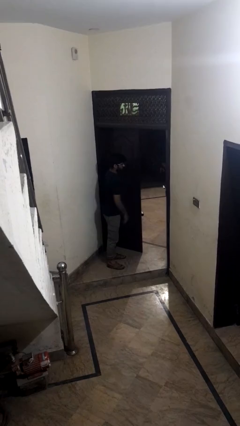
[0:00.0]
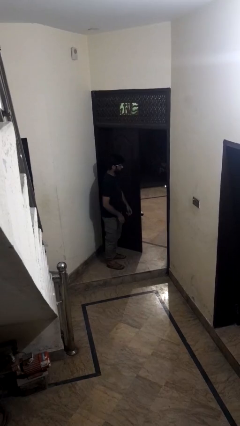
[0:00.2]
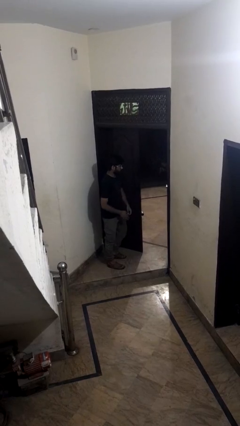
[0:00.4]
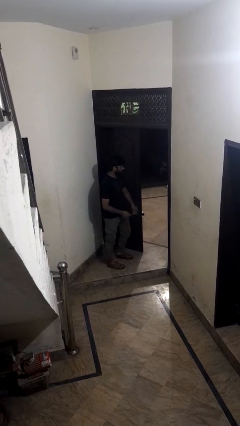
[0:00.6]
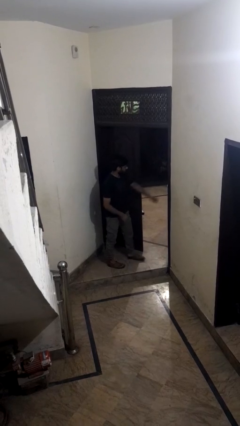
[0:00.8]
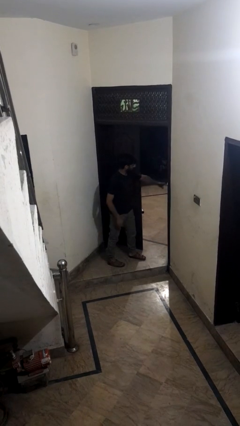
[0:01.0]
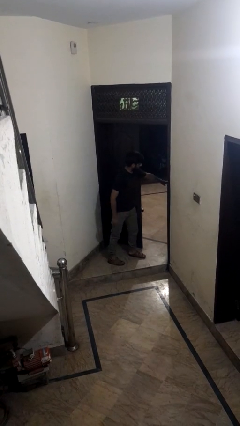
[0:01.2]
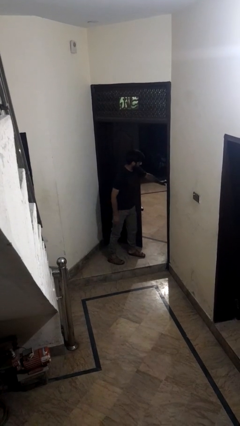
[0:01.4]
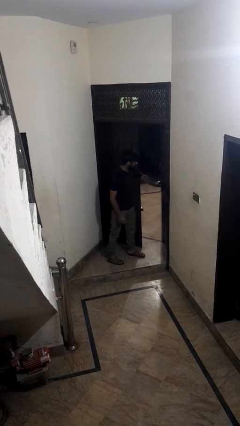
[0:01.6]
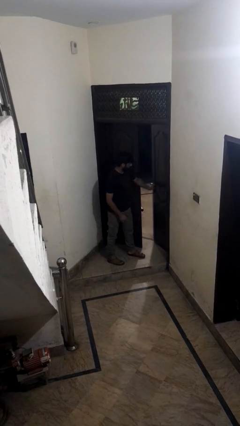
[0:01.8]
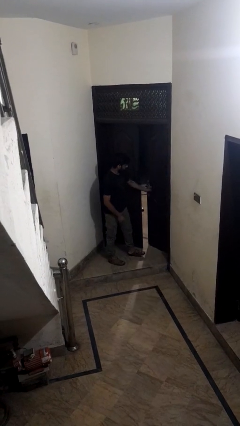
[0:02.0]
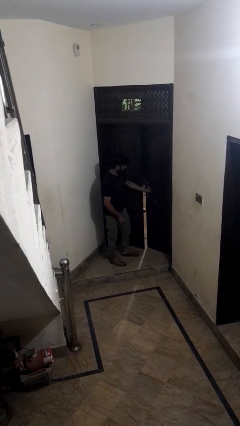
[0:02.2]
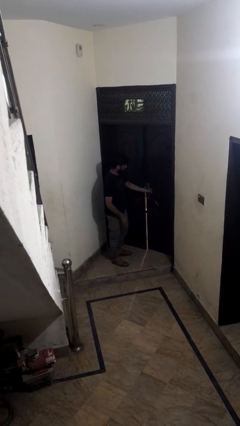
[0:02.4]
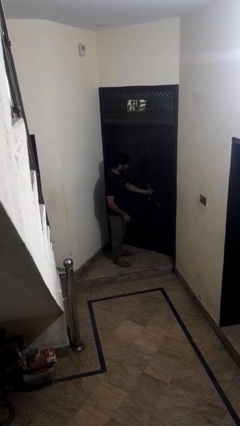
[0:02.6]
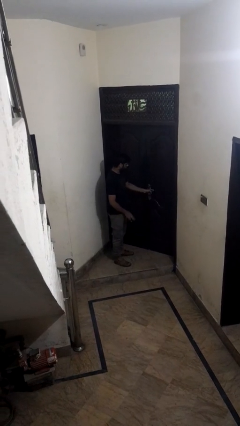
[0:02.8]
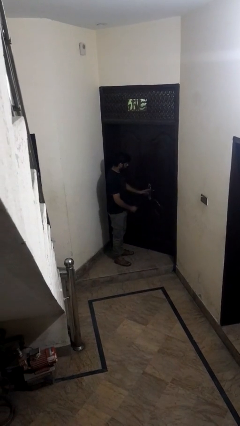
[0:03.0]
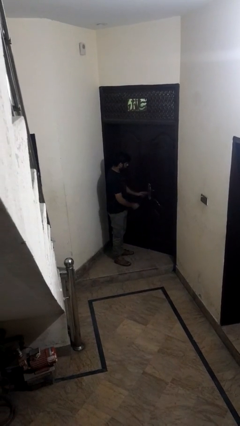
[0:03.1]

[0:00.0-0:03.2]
person closes facility door

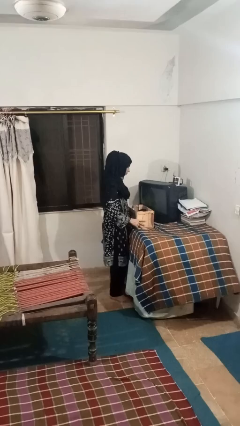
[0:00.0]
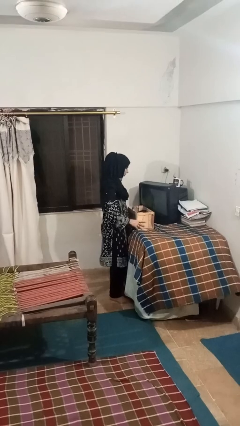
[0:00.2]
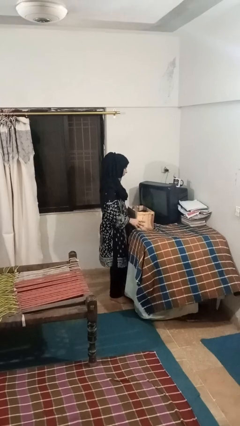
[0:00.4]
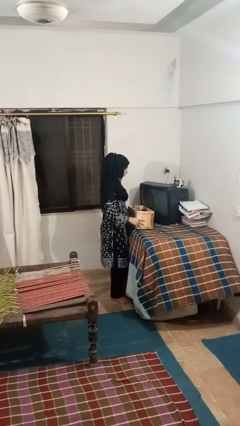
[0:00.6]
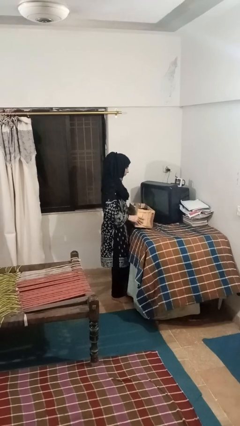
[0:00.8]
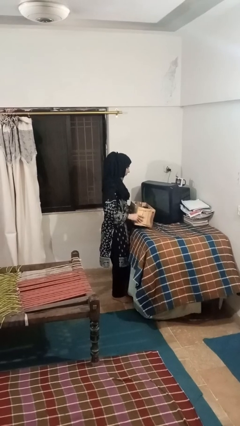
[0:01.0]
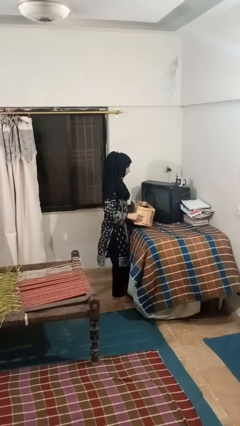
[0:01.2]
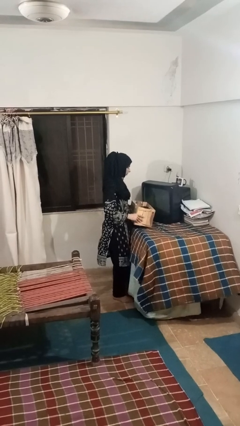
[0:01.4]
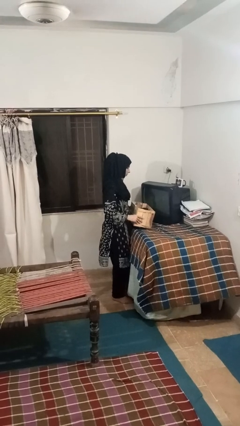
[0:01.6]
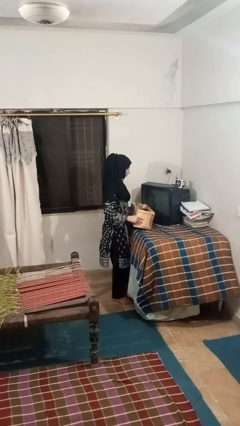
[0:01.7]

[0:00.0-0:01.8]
person unloads box onto table

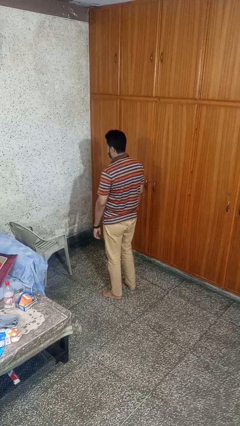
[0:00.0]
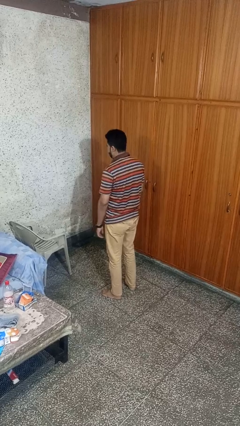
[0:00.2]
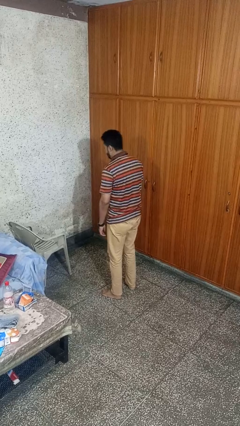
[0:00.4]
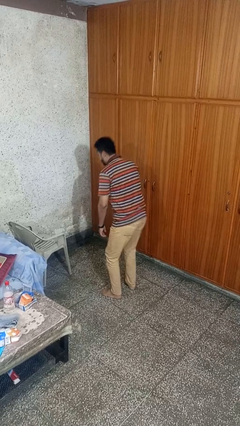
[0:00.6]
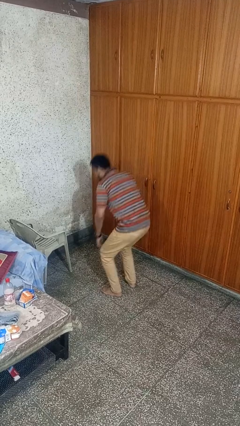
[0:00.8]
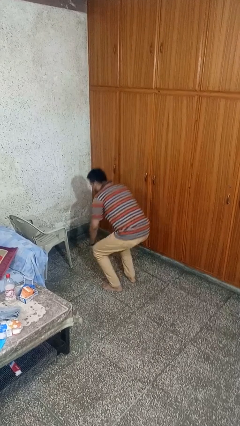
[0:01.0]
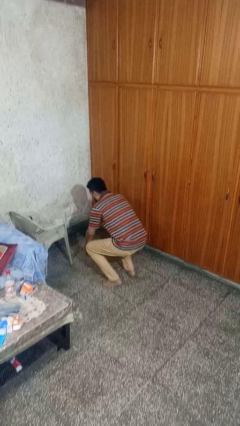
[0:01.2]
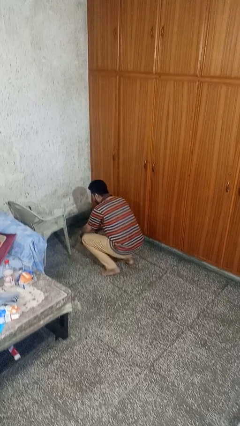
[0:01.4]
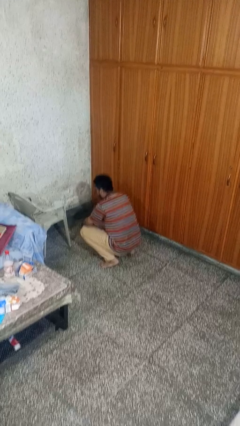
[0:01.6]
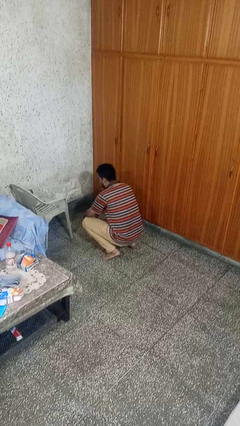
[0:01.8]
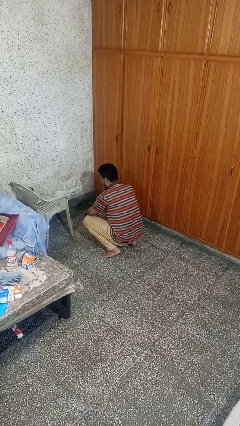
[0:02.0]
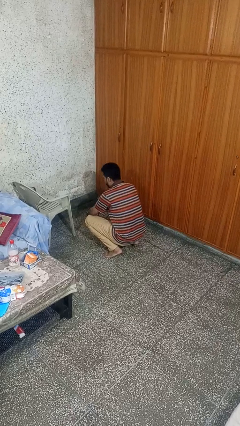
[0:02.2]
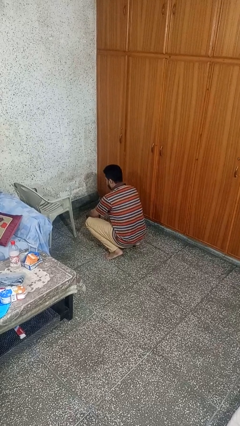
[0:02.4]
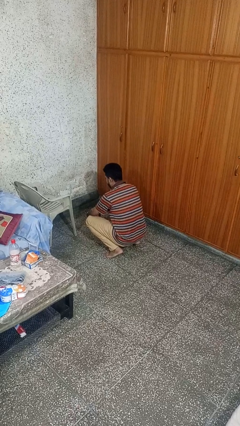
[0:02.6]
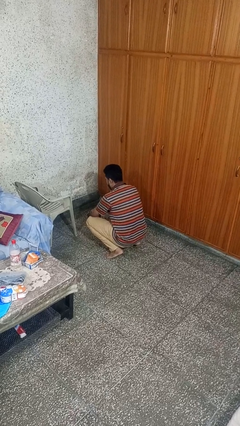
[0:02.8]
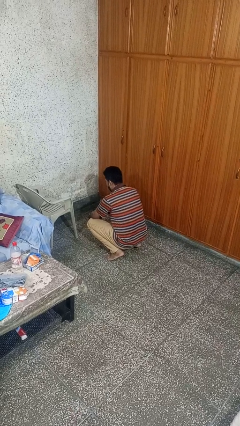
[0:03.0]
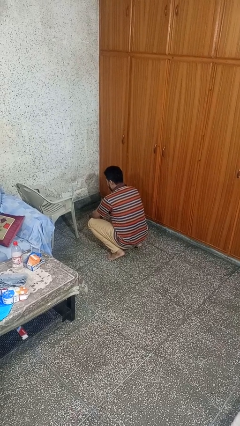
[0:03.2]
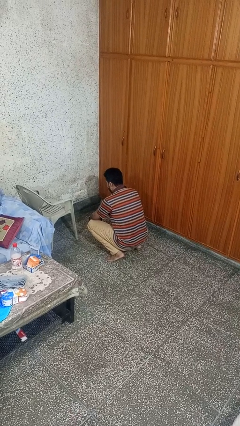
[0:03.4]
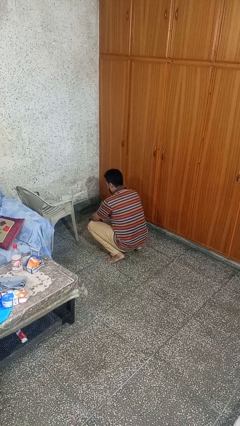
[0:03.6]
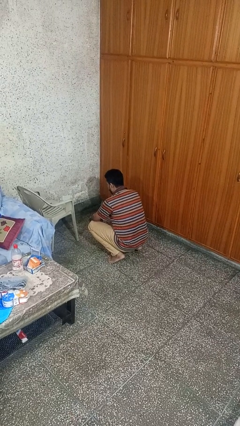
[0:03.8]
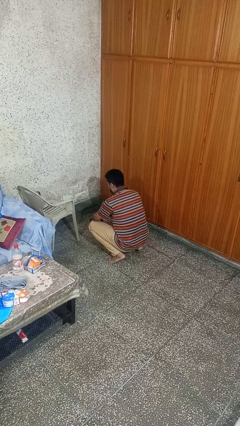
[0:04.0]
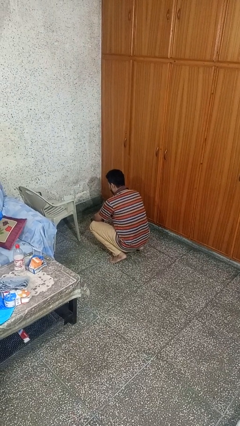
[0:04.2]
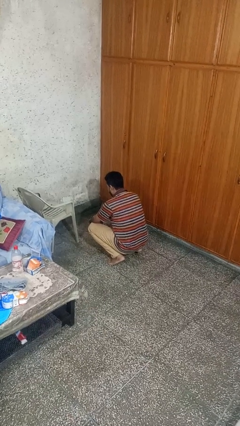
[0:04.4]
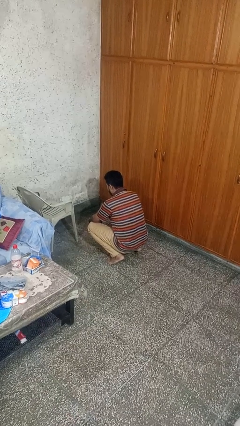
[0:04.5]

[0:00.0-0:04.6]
person squats

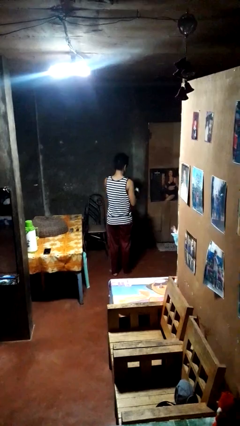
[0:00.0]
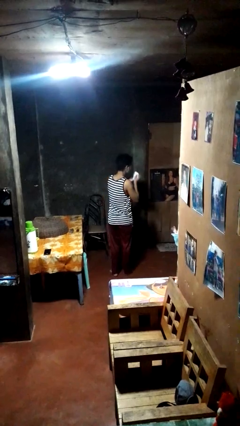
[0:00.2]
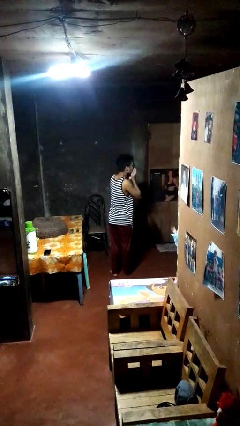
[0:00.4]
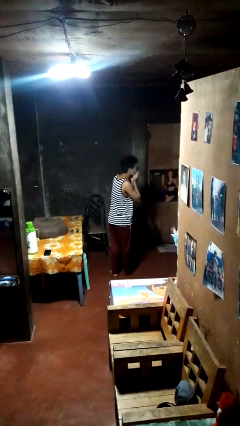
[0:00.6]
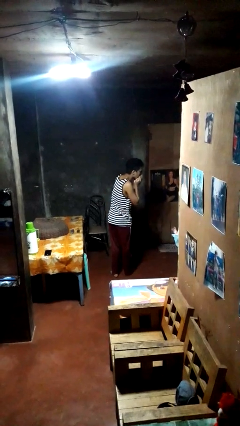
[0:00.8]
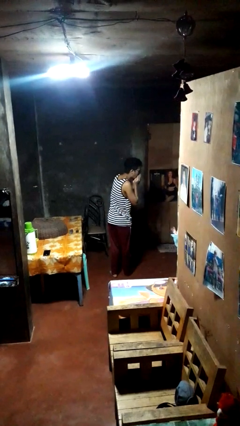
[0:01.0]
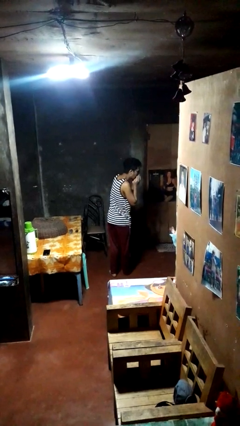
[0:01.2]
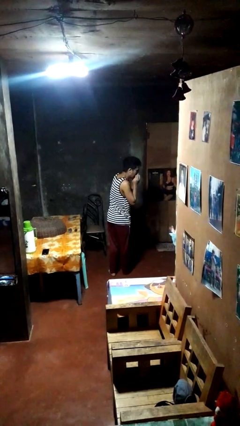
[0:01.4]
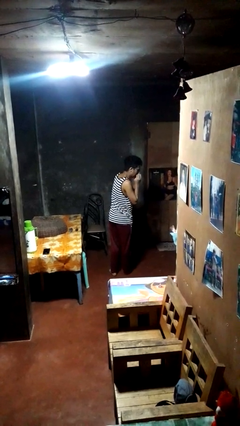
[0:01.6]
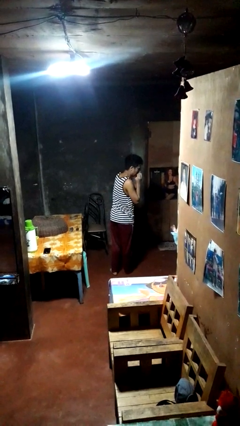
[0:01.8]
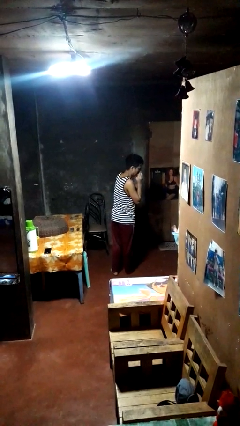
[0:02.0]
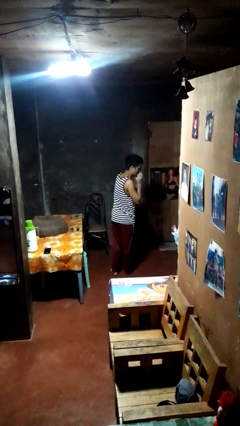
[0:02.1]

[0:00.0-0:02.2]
person blows nose

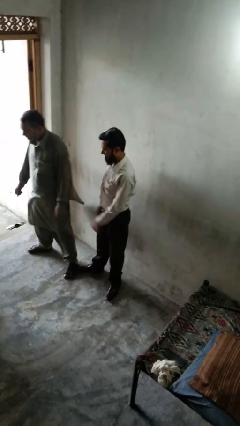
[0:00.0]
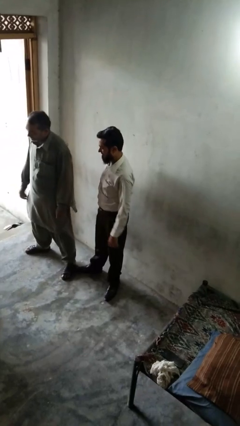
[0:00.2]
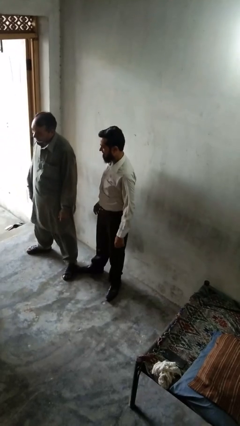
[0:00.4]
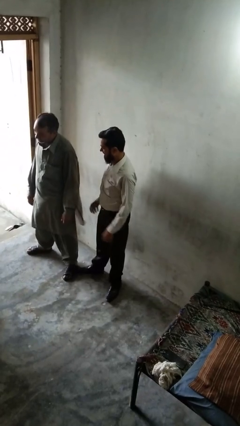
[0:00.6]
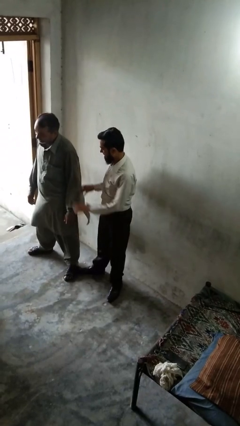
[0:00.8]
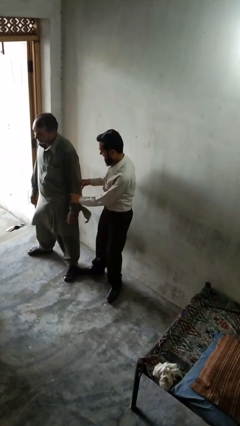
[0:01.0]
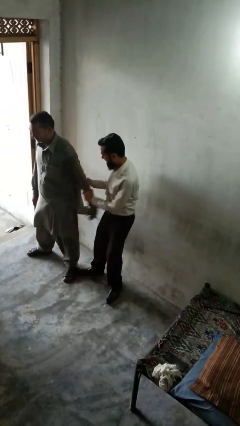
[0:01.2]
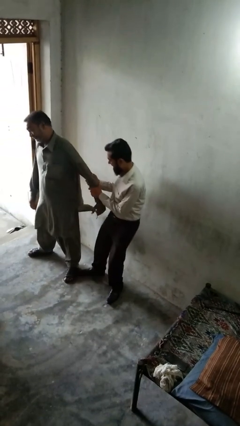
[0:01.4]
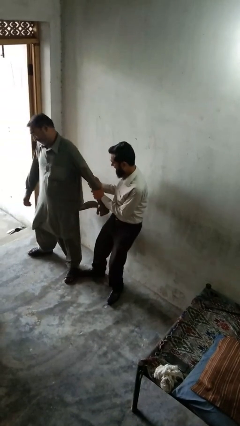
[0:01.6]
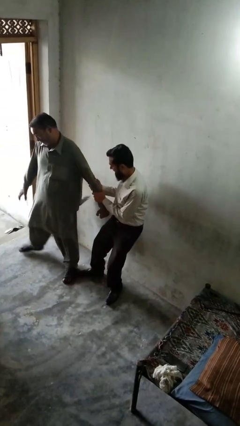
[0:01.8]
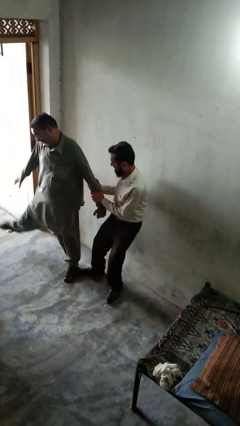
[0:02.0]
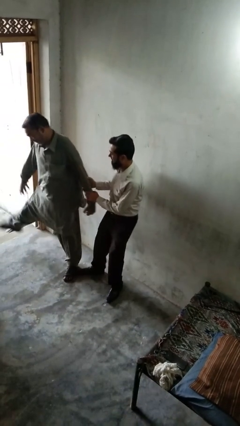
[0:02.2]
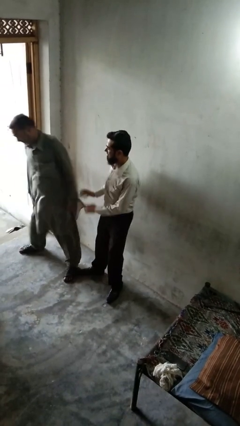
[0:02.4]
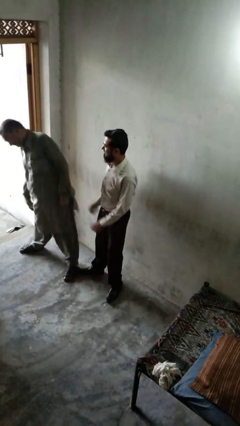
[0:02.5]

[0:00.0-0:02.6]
person grabs person by forearm

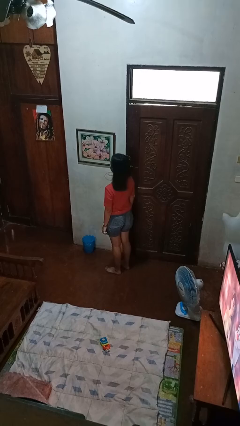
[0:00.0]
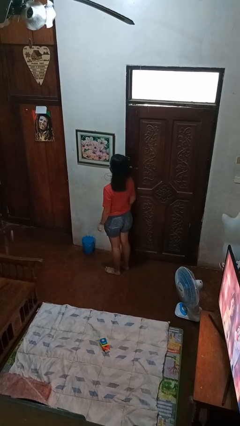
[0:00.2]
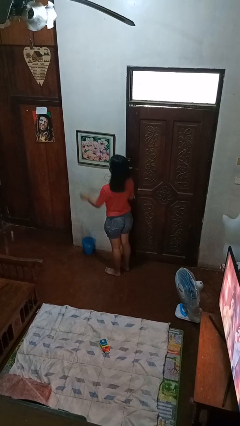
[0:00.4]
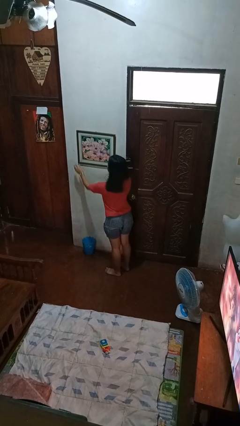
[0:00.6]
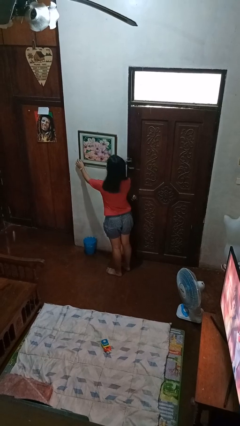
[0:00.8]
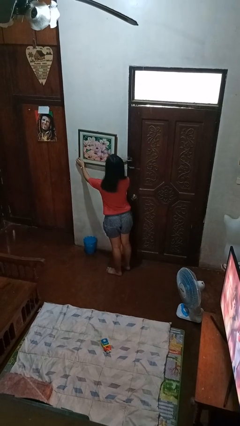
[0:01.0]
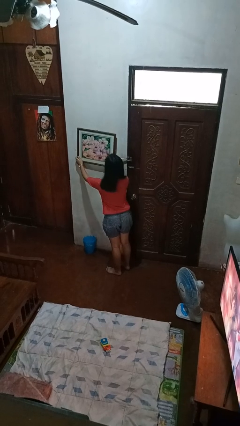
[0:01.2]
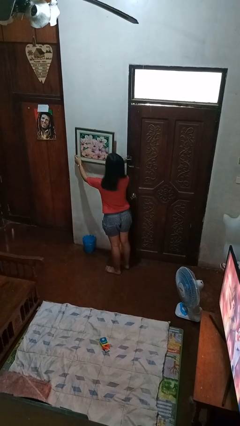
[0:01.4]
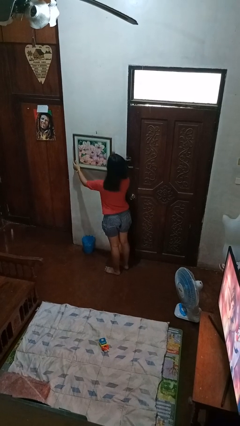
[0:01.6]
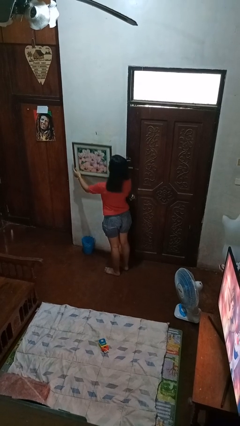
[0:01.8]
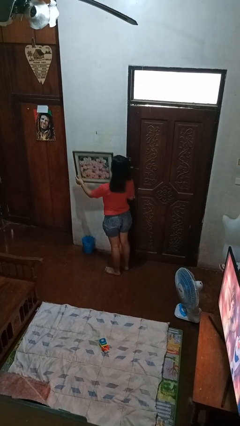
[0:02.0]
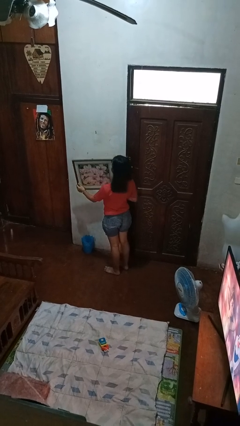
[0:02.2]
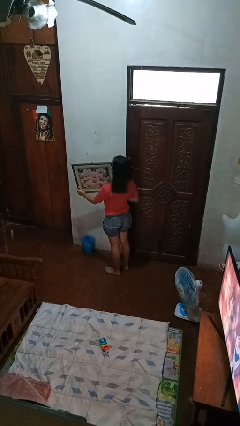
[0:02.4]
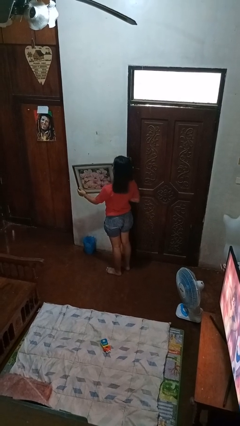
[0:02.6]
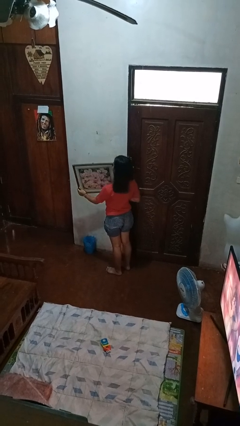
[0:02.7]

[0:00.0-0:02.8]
person takes down picture frame
